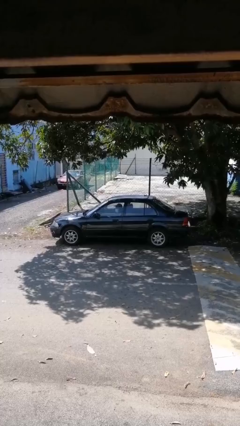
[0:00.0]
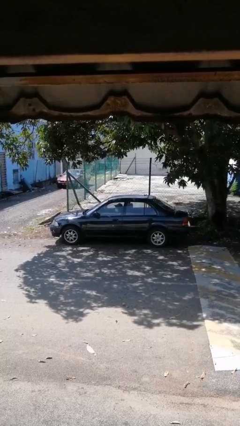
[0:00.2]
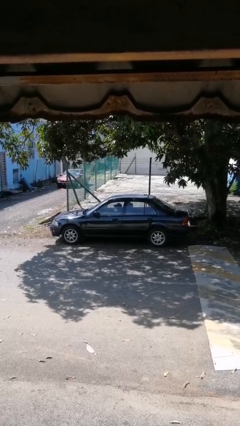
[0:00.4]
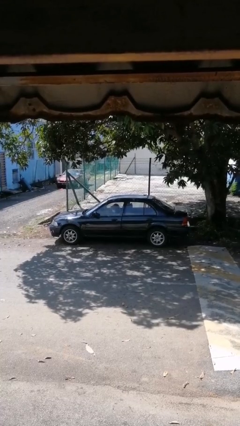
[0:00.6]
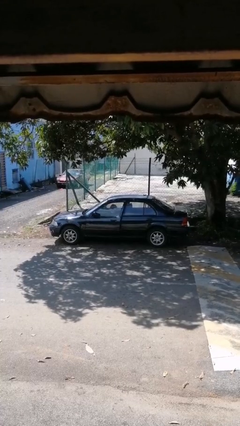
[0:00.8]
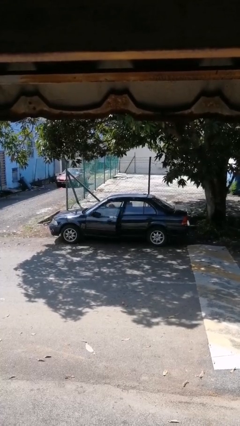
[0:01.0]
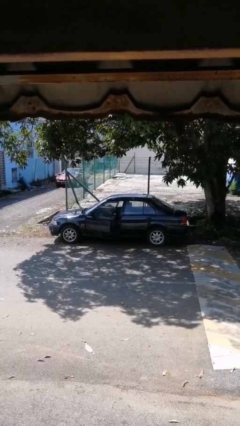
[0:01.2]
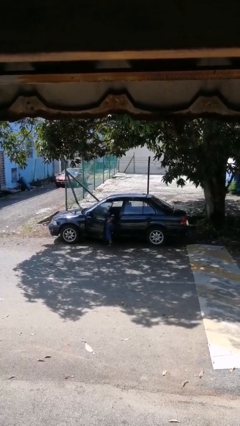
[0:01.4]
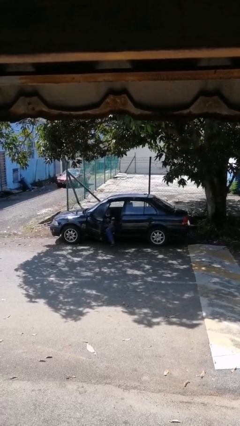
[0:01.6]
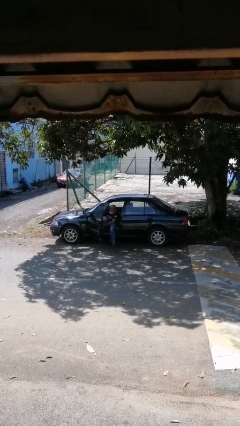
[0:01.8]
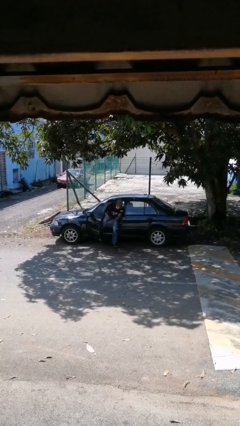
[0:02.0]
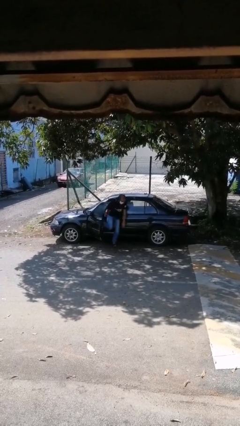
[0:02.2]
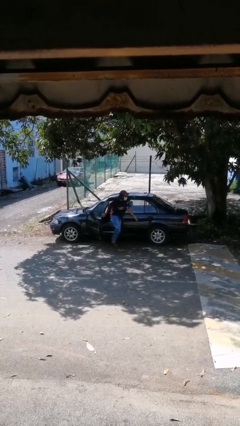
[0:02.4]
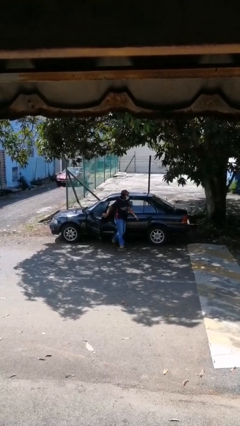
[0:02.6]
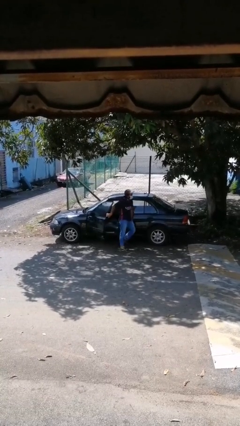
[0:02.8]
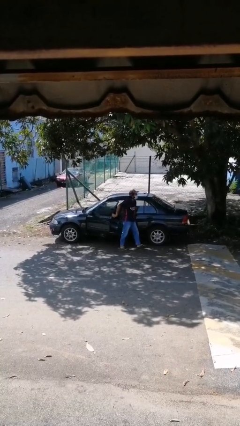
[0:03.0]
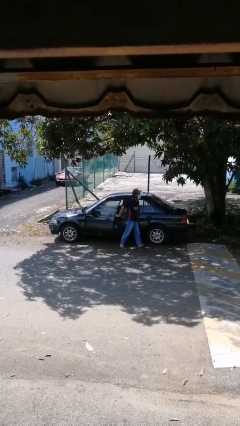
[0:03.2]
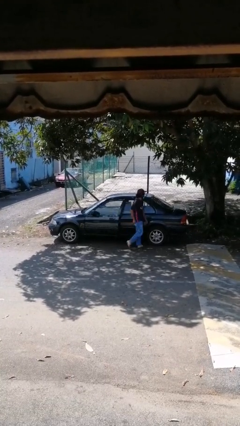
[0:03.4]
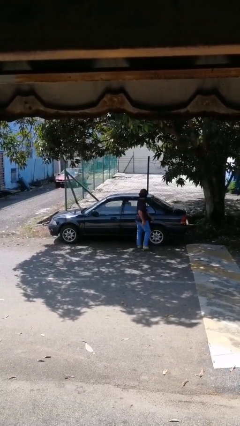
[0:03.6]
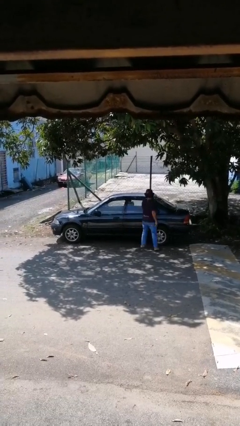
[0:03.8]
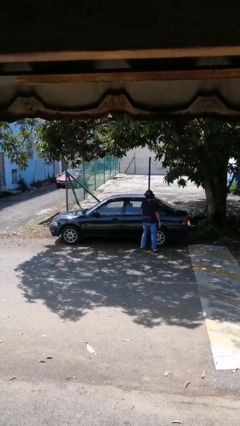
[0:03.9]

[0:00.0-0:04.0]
car drops off person

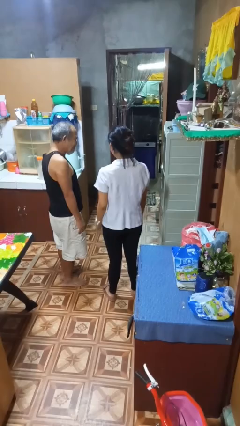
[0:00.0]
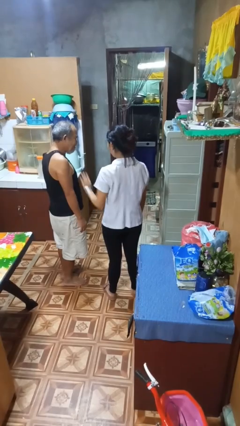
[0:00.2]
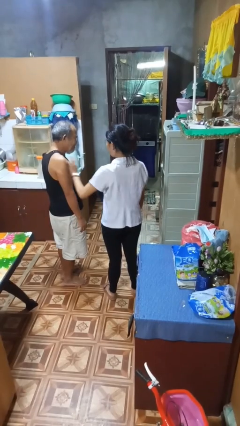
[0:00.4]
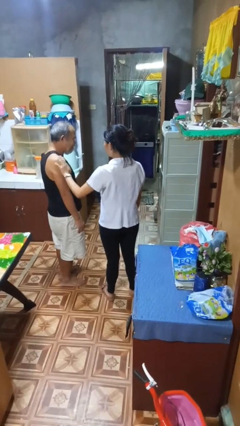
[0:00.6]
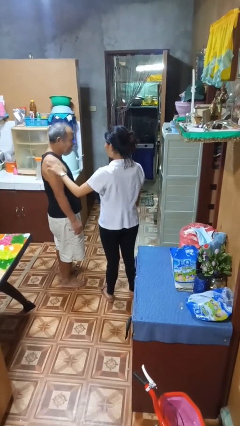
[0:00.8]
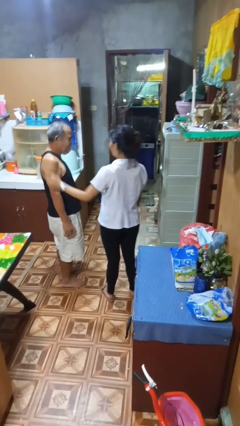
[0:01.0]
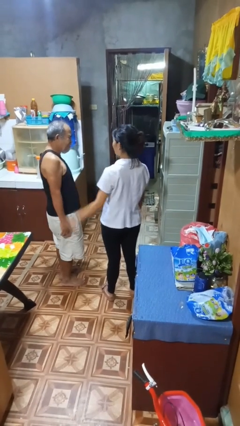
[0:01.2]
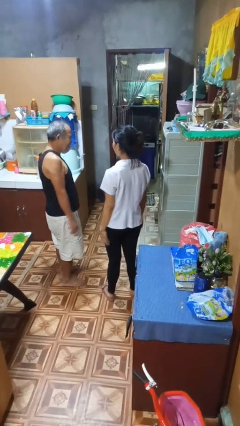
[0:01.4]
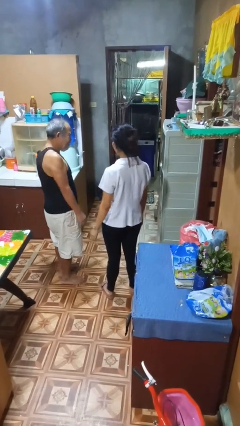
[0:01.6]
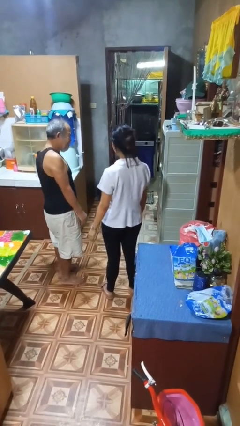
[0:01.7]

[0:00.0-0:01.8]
person shoves person

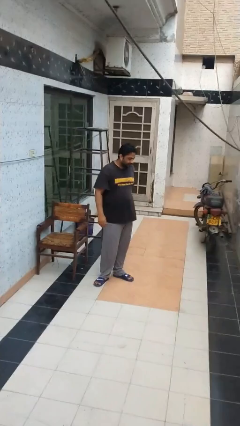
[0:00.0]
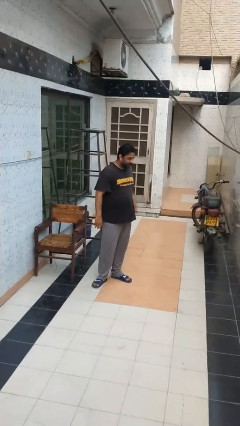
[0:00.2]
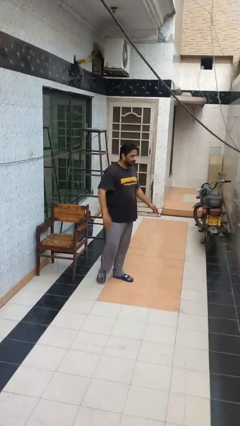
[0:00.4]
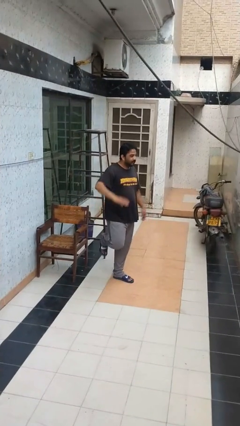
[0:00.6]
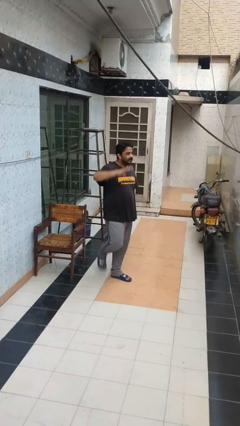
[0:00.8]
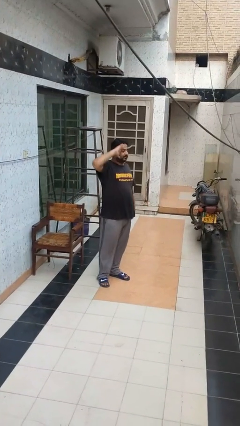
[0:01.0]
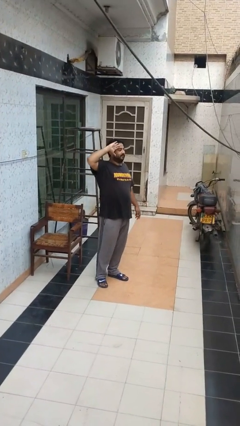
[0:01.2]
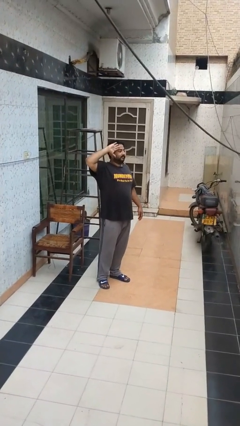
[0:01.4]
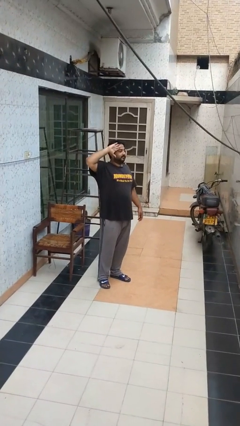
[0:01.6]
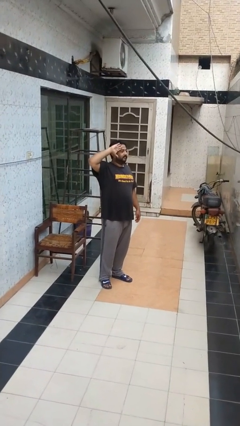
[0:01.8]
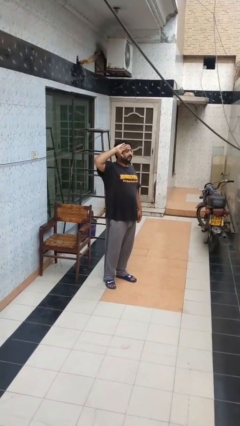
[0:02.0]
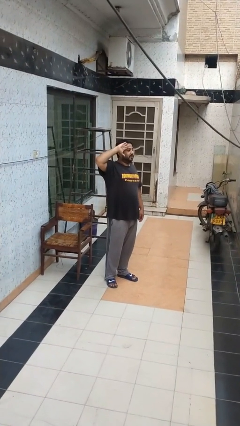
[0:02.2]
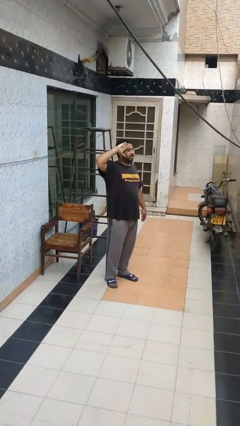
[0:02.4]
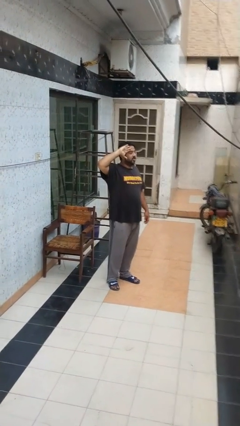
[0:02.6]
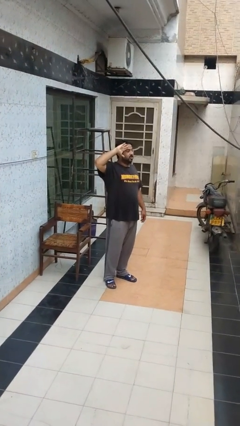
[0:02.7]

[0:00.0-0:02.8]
person salutes

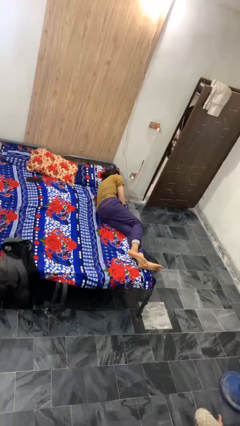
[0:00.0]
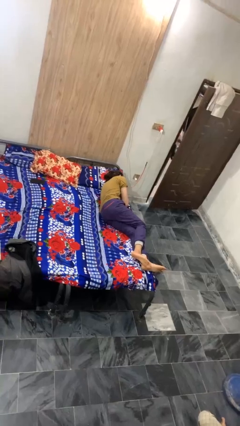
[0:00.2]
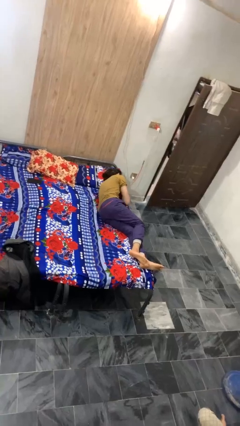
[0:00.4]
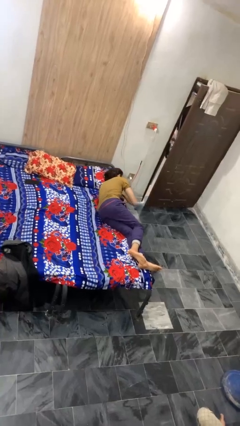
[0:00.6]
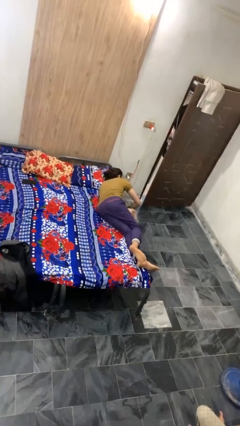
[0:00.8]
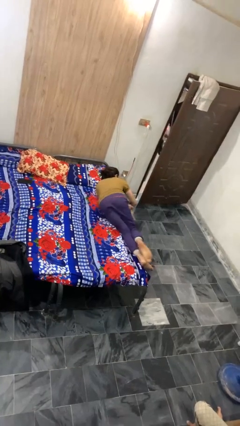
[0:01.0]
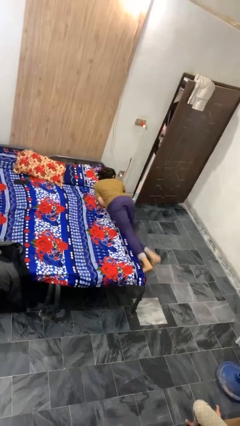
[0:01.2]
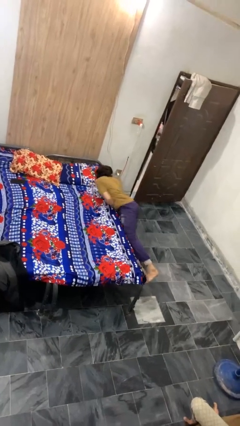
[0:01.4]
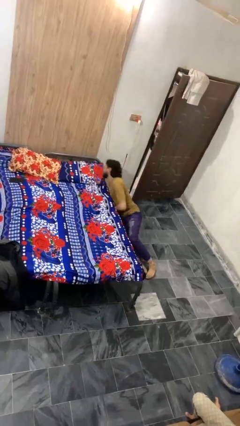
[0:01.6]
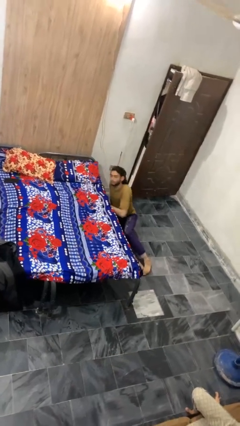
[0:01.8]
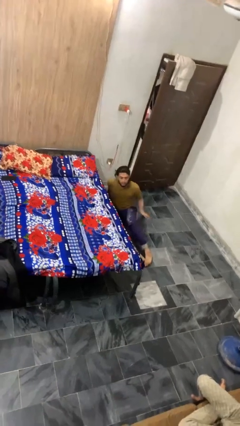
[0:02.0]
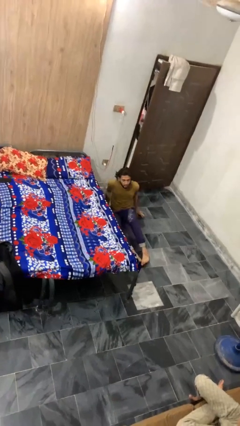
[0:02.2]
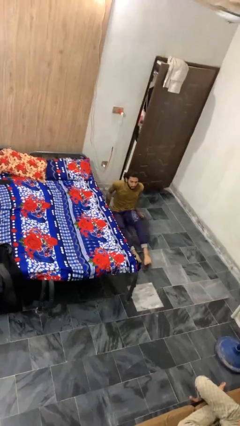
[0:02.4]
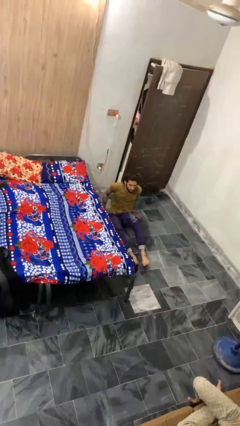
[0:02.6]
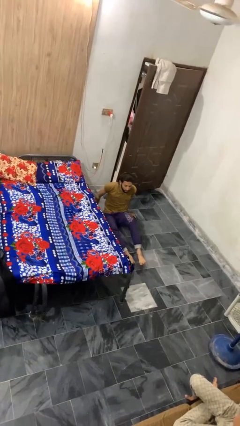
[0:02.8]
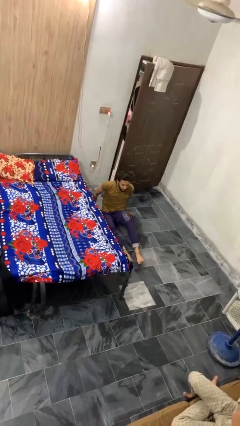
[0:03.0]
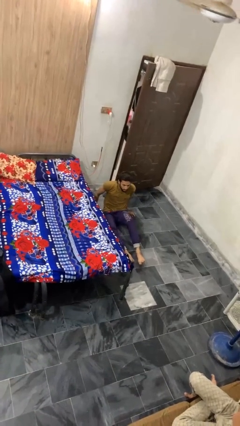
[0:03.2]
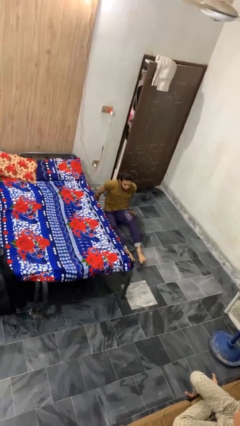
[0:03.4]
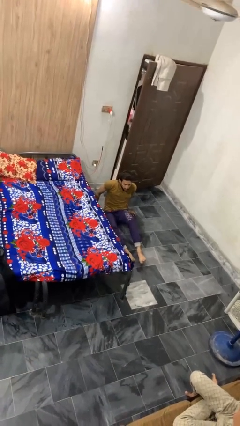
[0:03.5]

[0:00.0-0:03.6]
person falls from bed

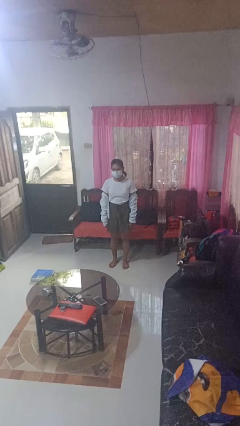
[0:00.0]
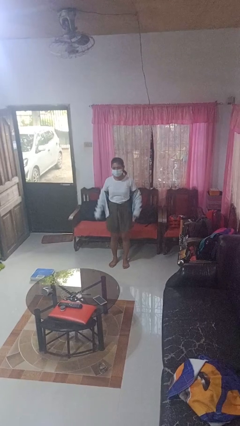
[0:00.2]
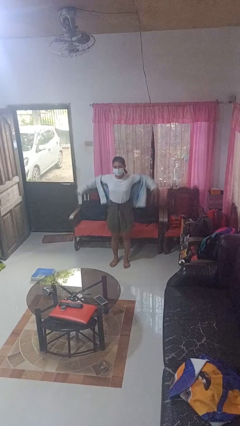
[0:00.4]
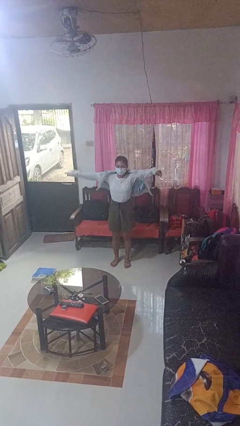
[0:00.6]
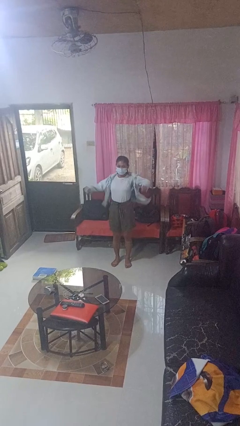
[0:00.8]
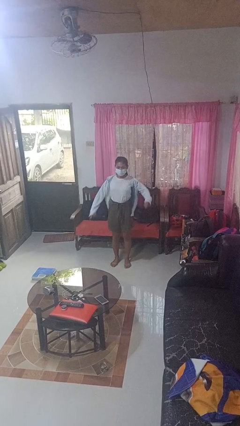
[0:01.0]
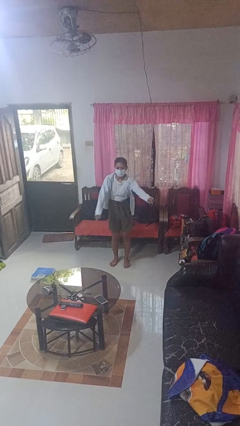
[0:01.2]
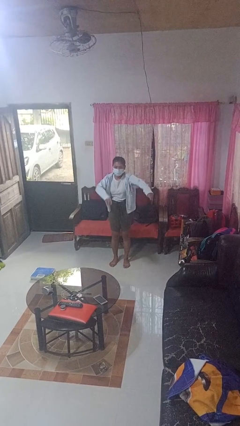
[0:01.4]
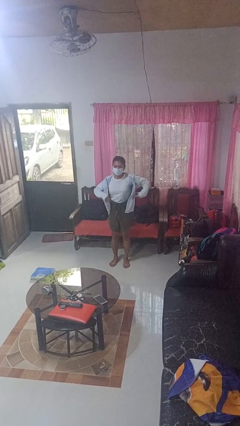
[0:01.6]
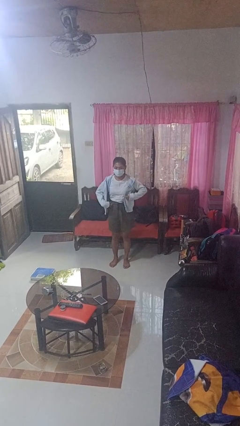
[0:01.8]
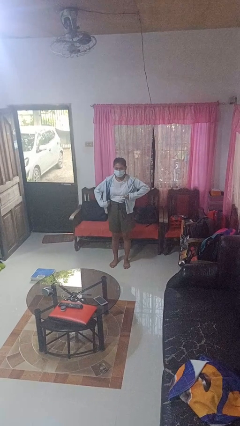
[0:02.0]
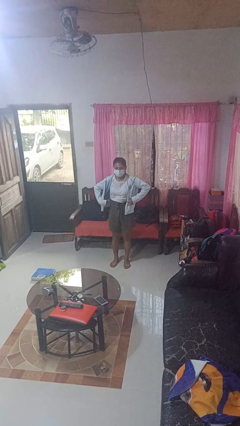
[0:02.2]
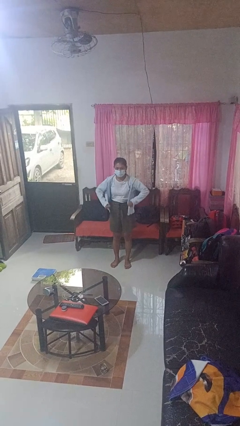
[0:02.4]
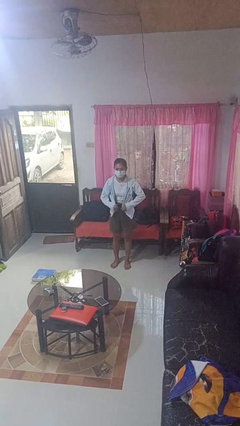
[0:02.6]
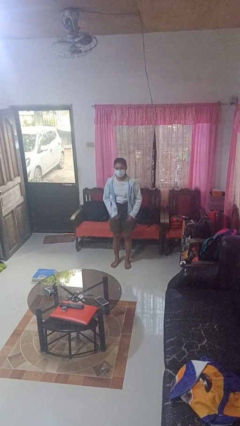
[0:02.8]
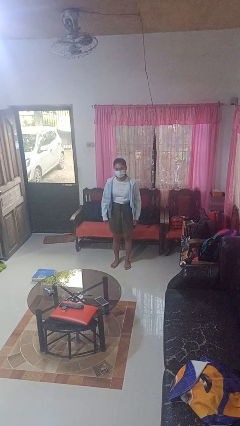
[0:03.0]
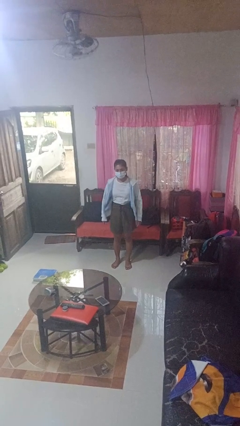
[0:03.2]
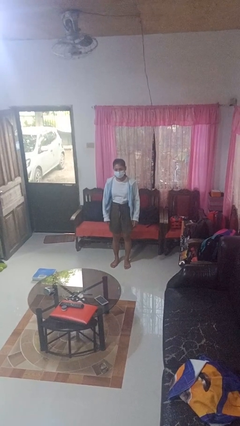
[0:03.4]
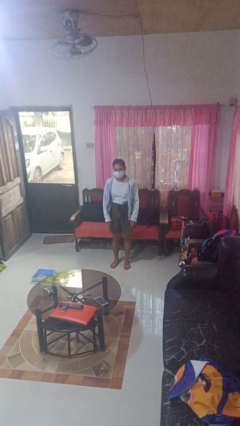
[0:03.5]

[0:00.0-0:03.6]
person puts on jacket

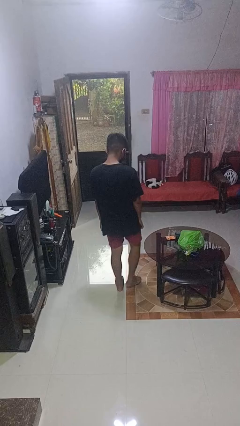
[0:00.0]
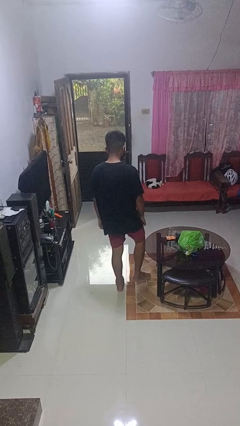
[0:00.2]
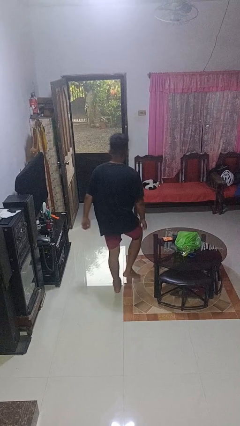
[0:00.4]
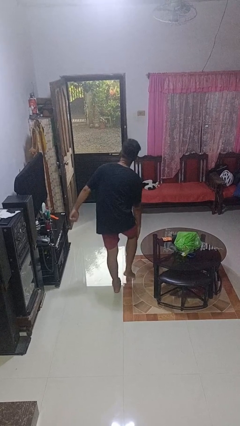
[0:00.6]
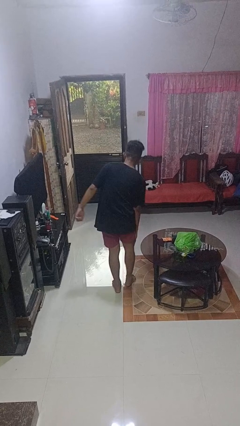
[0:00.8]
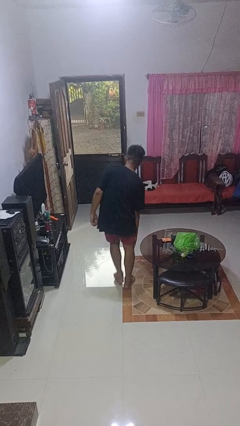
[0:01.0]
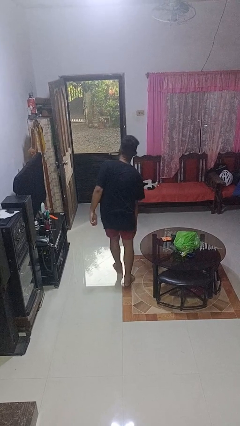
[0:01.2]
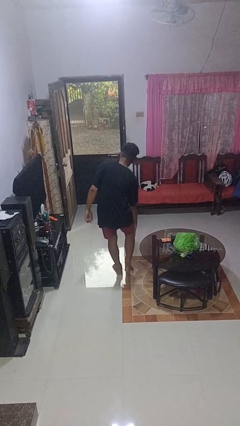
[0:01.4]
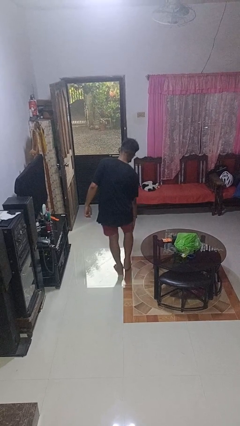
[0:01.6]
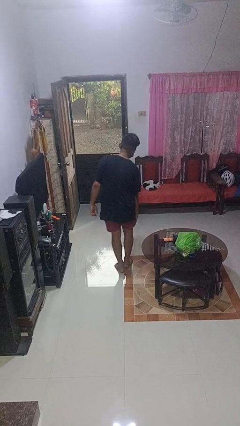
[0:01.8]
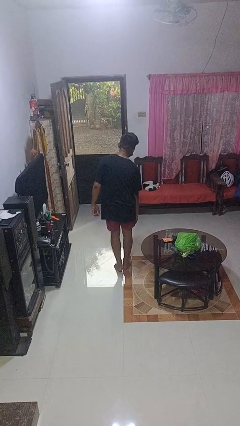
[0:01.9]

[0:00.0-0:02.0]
person bumps into table
